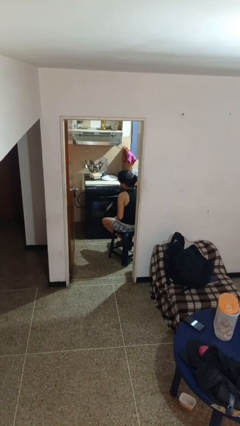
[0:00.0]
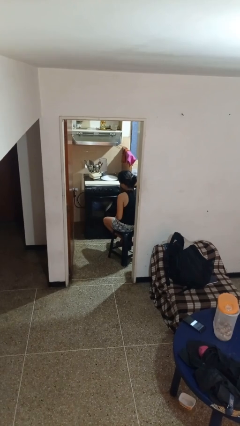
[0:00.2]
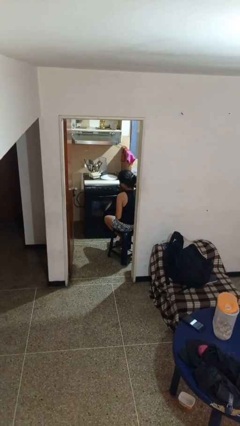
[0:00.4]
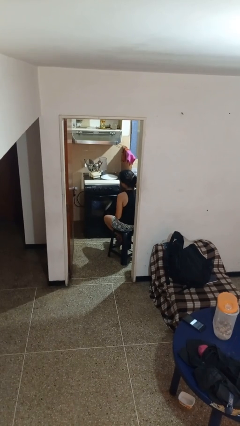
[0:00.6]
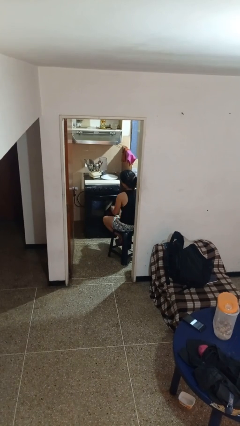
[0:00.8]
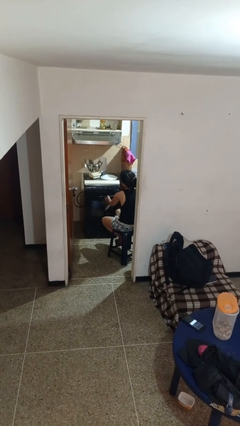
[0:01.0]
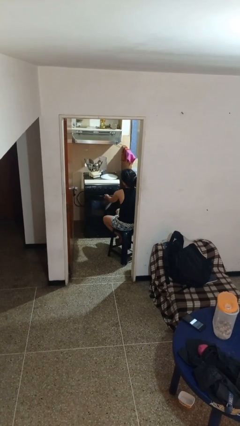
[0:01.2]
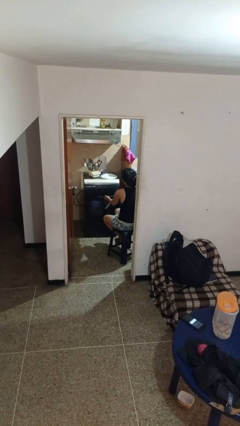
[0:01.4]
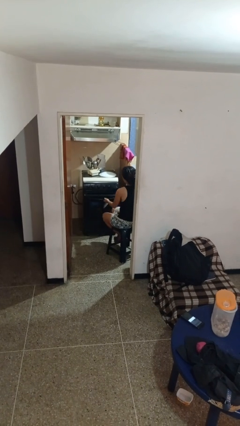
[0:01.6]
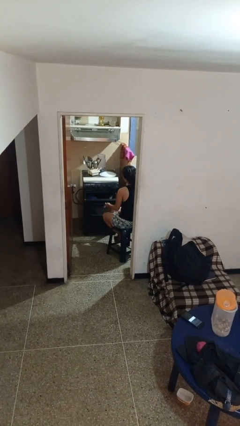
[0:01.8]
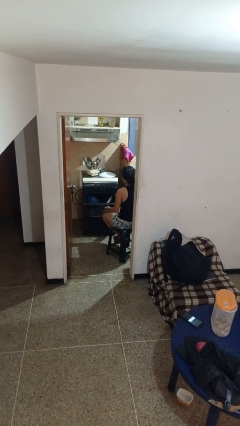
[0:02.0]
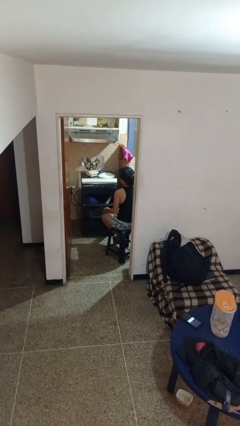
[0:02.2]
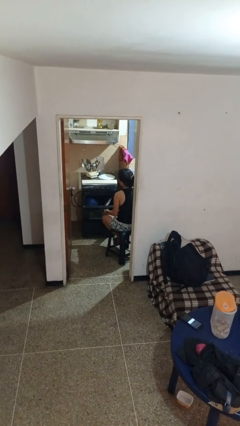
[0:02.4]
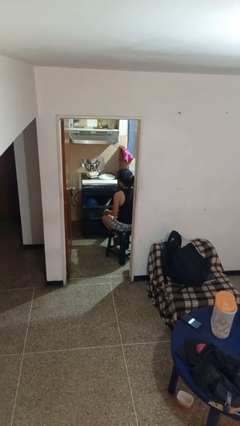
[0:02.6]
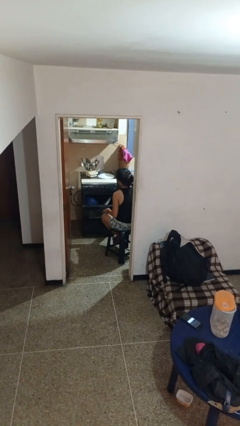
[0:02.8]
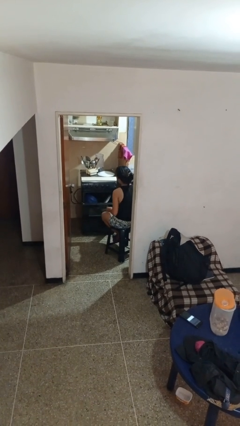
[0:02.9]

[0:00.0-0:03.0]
person opens dishwasher

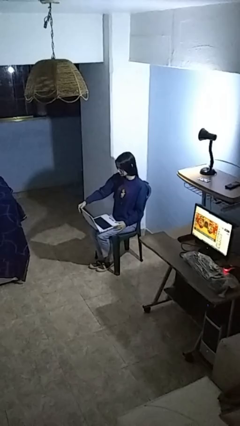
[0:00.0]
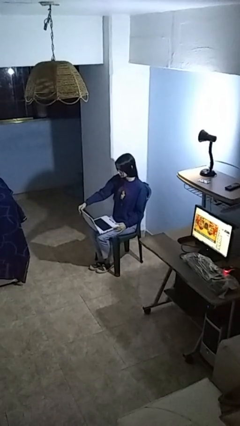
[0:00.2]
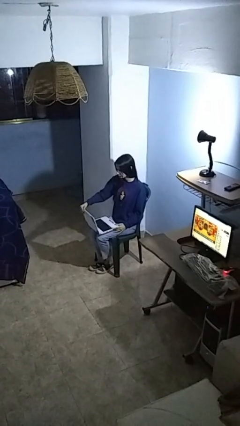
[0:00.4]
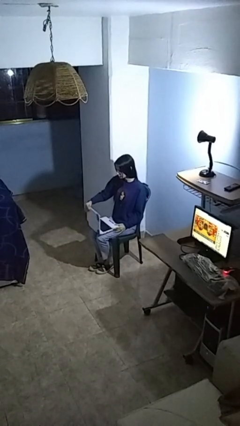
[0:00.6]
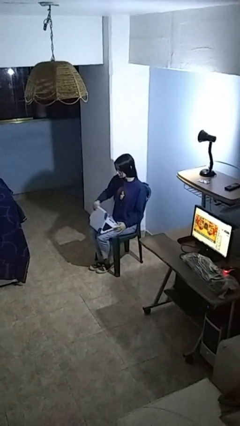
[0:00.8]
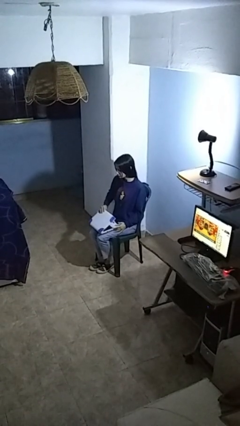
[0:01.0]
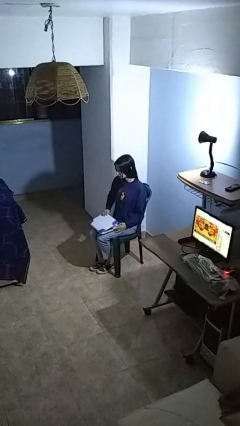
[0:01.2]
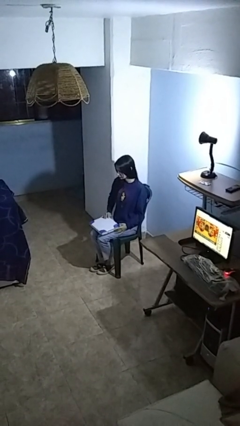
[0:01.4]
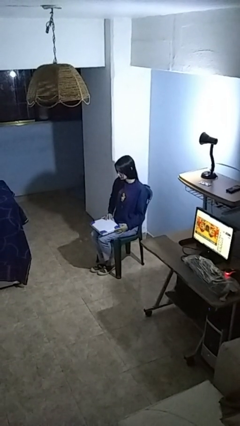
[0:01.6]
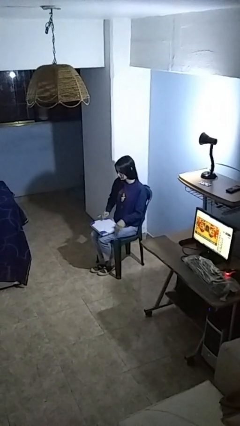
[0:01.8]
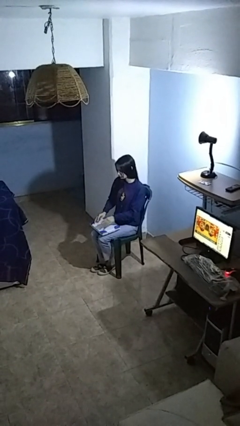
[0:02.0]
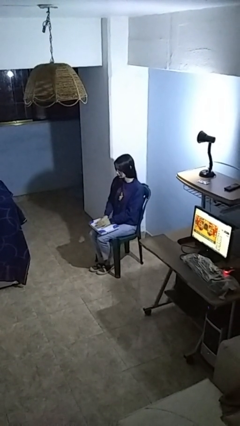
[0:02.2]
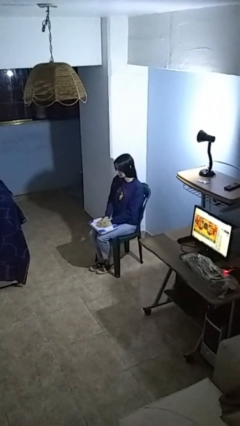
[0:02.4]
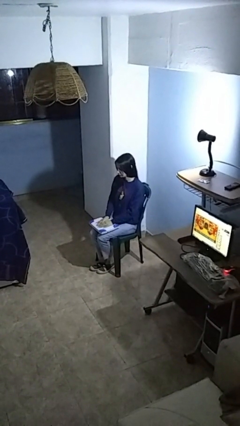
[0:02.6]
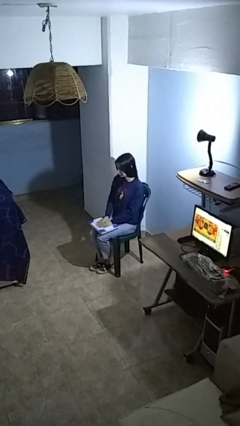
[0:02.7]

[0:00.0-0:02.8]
person closes laptop

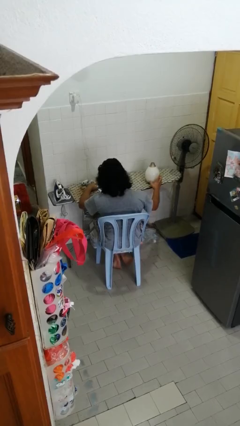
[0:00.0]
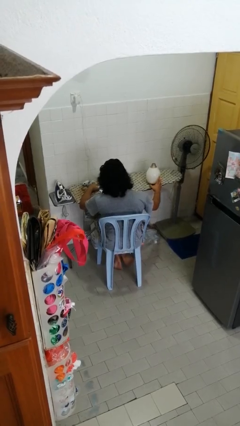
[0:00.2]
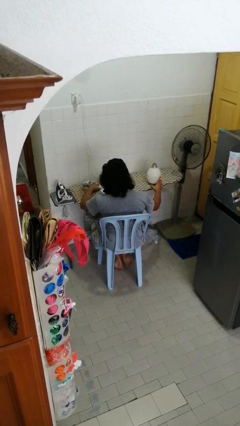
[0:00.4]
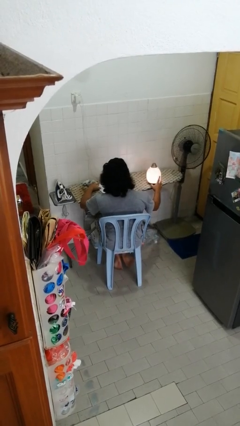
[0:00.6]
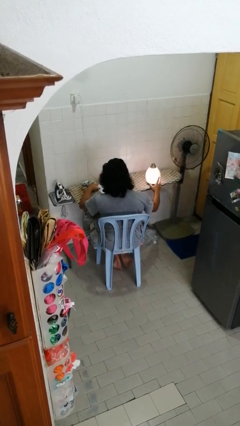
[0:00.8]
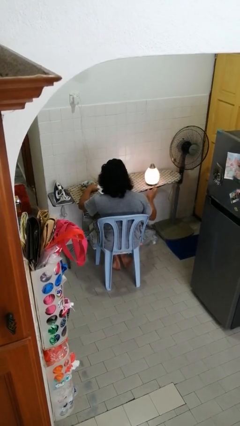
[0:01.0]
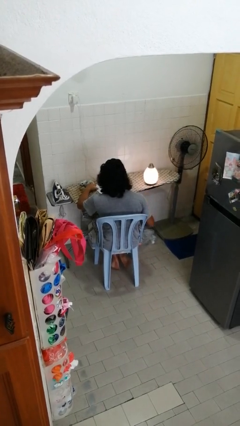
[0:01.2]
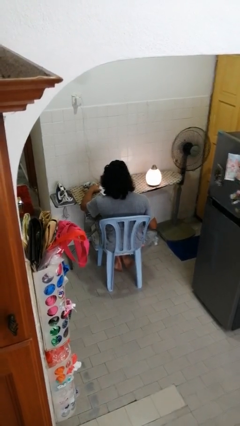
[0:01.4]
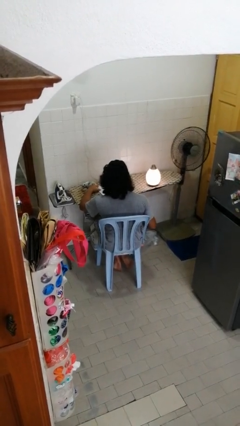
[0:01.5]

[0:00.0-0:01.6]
person turns on lamp

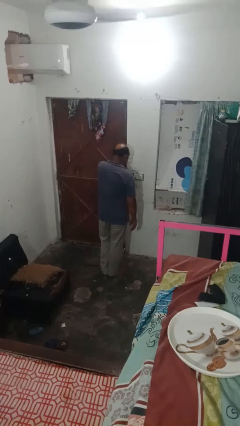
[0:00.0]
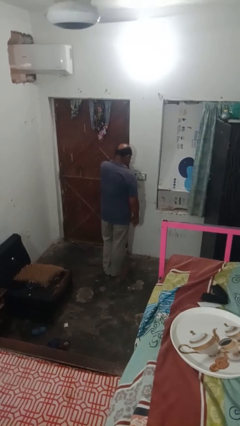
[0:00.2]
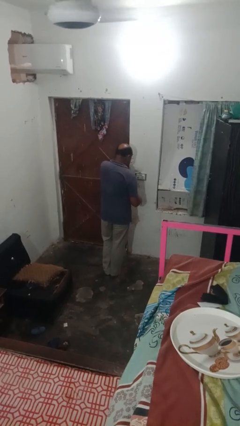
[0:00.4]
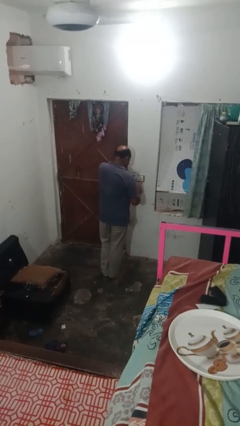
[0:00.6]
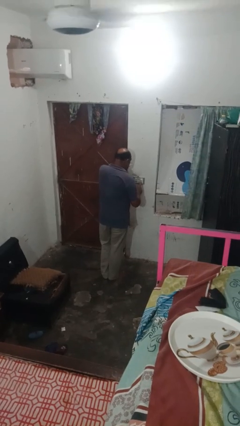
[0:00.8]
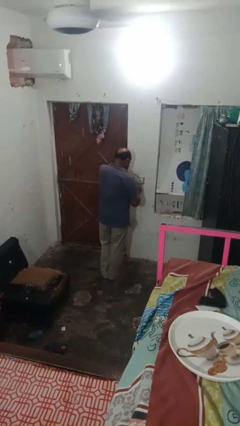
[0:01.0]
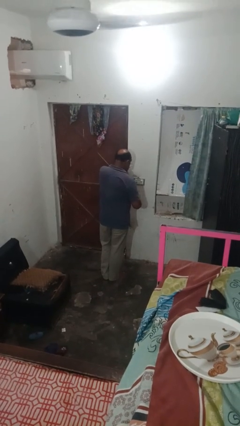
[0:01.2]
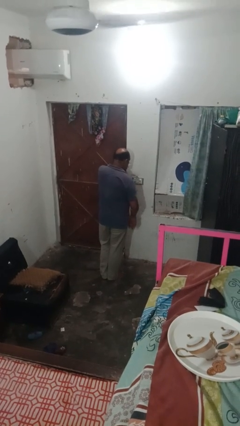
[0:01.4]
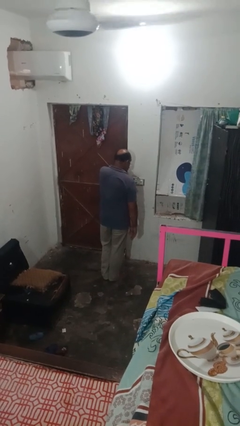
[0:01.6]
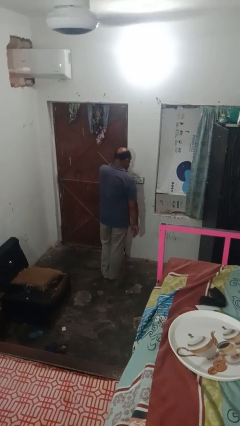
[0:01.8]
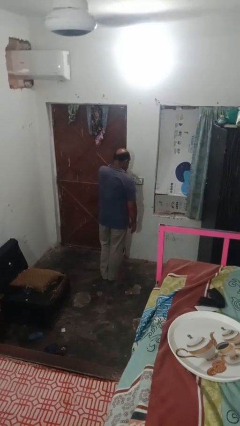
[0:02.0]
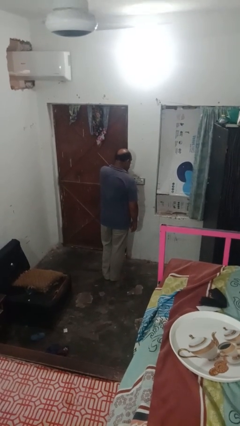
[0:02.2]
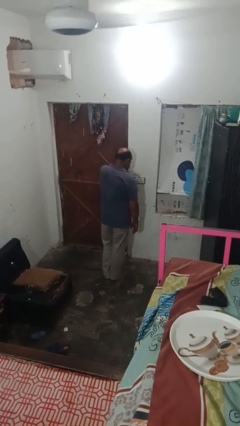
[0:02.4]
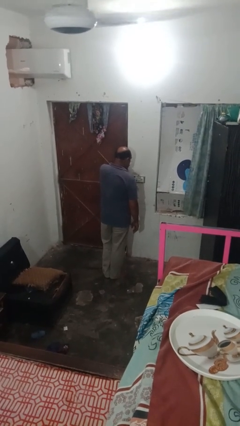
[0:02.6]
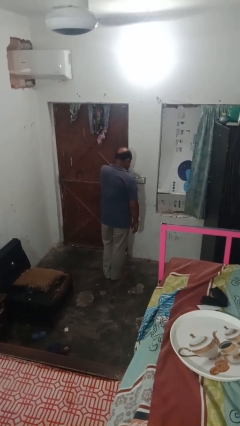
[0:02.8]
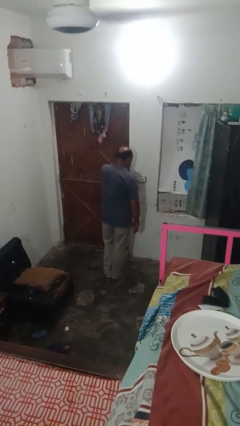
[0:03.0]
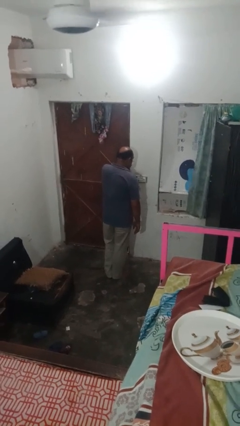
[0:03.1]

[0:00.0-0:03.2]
person turns on fan

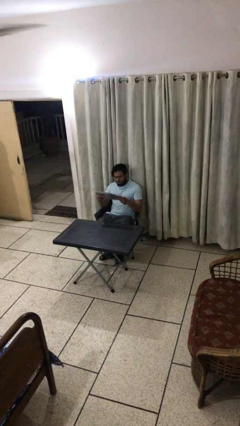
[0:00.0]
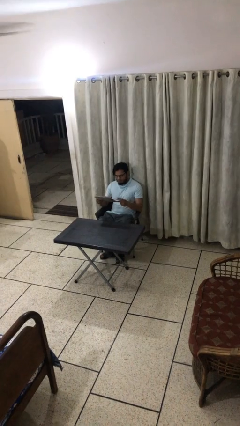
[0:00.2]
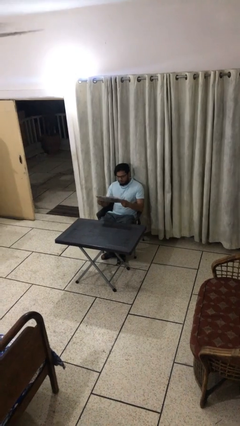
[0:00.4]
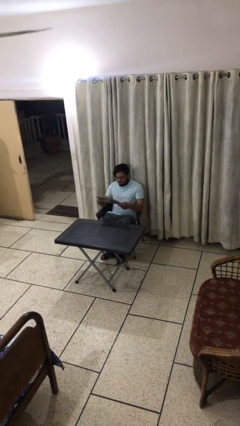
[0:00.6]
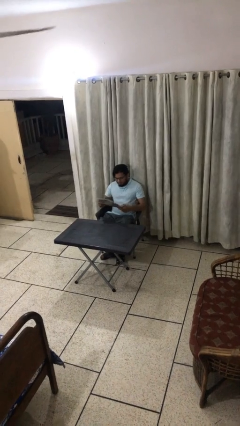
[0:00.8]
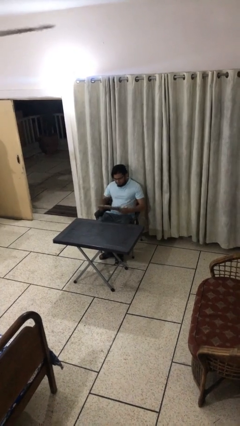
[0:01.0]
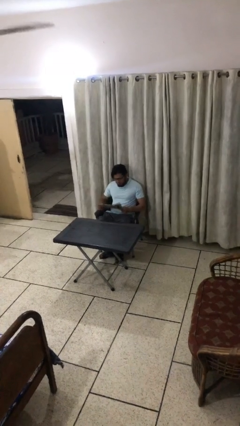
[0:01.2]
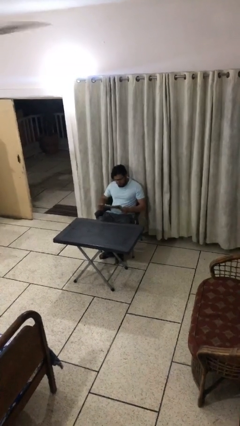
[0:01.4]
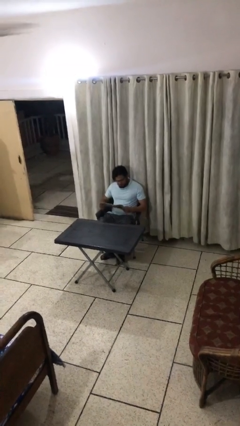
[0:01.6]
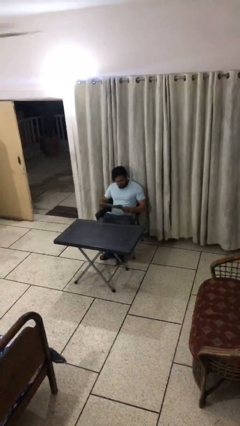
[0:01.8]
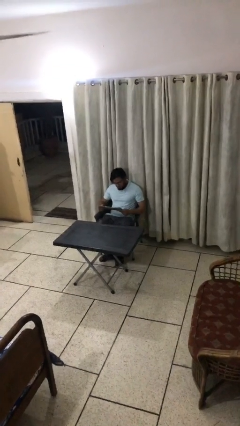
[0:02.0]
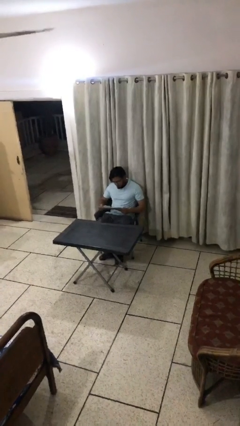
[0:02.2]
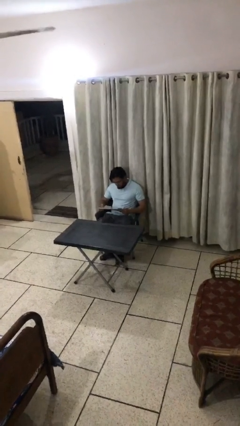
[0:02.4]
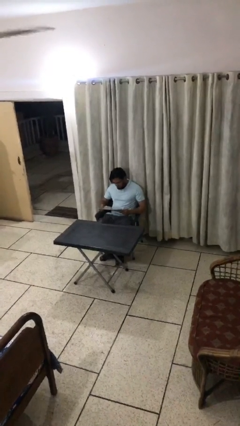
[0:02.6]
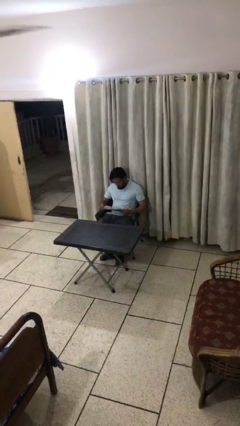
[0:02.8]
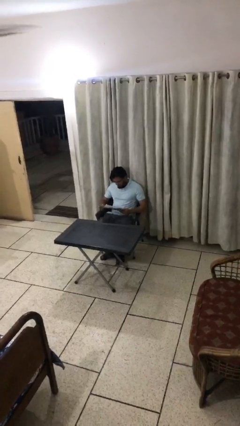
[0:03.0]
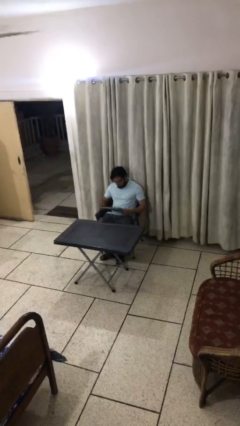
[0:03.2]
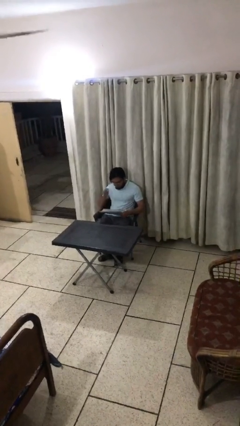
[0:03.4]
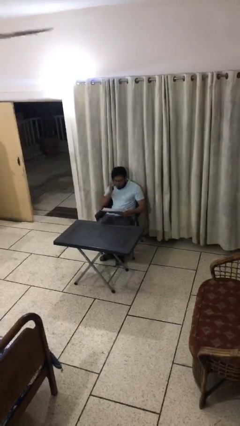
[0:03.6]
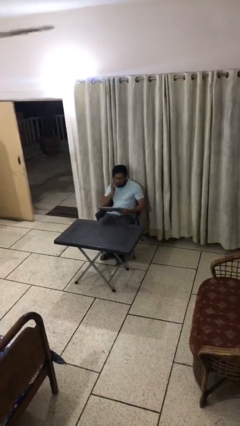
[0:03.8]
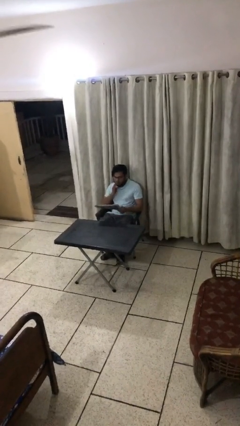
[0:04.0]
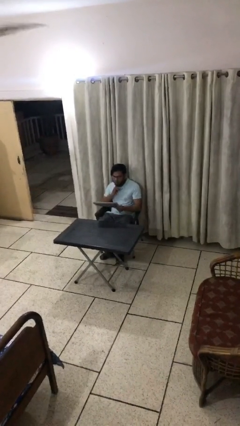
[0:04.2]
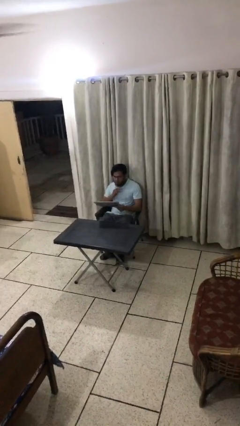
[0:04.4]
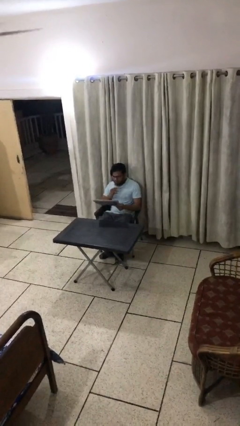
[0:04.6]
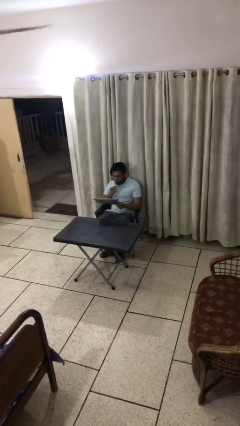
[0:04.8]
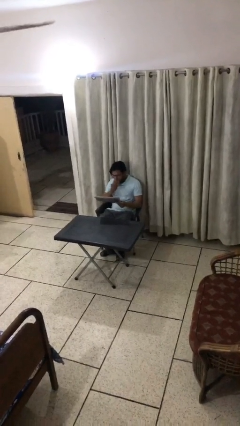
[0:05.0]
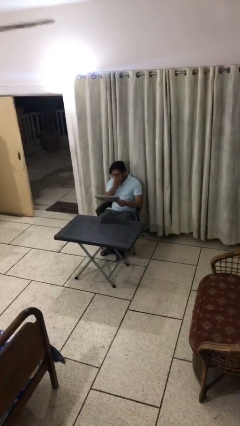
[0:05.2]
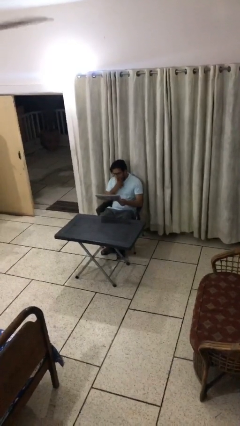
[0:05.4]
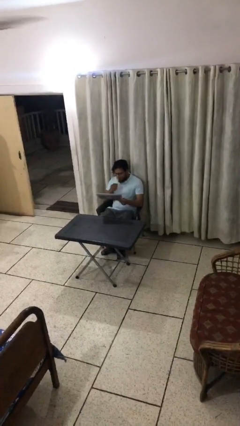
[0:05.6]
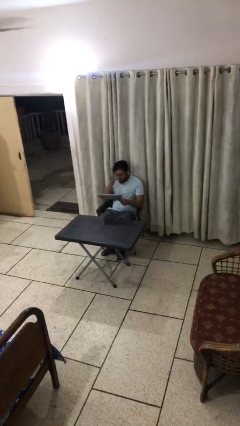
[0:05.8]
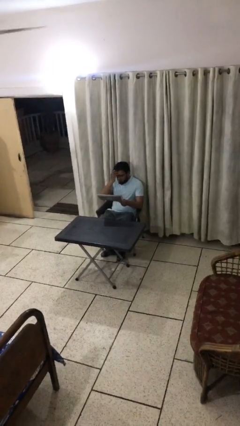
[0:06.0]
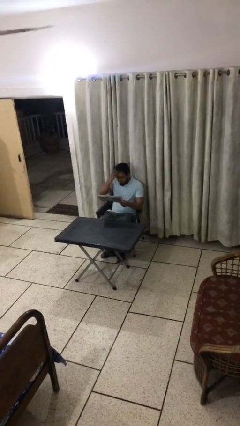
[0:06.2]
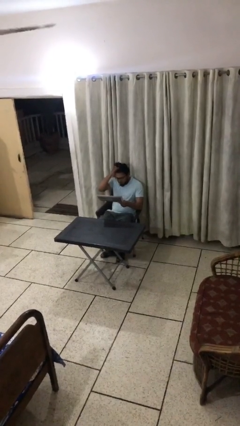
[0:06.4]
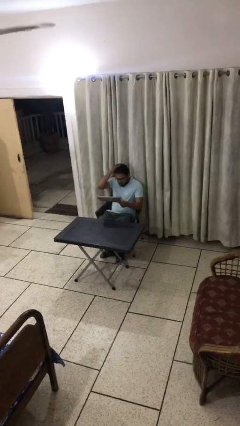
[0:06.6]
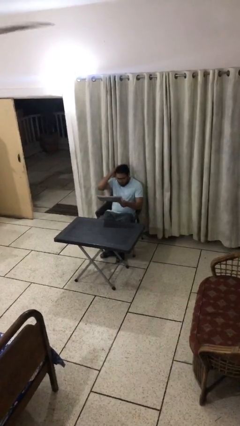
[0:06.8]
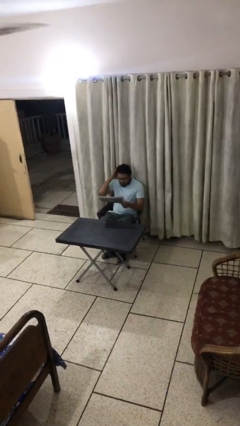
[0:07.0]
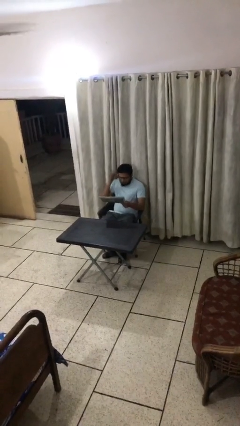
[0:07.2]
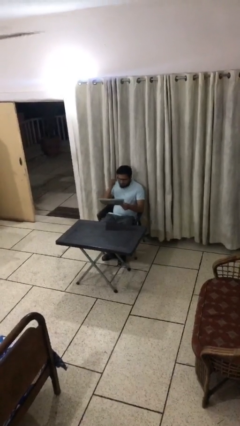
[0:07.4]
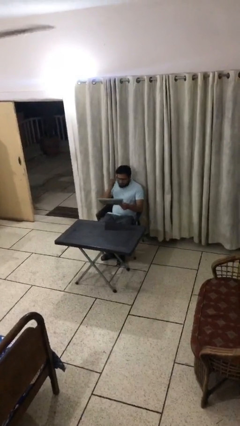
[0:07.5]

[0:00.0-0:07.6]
person reads document
